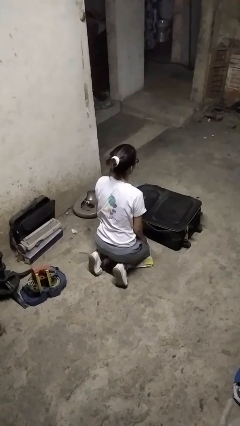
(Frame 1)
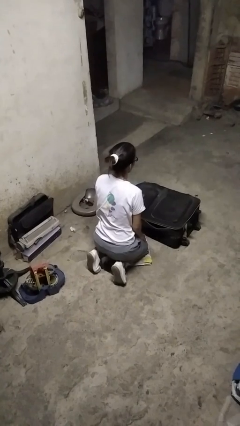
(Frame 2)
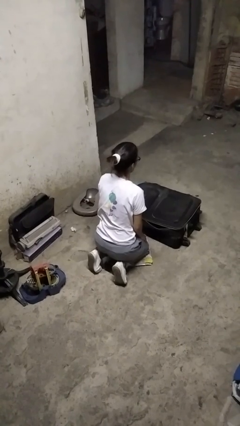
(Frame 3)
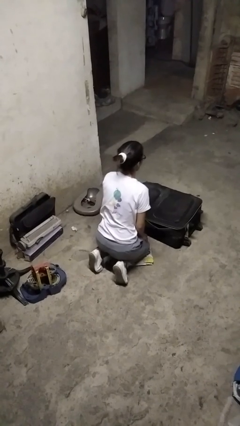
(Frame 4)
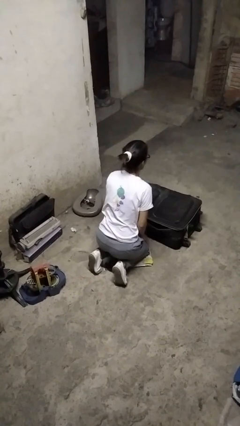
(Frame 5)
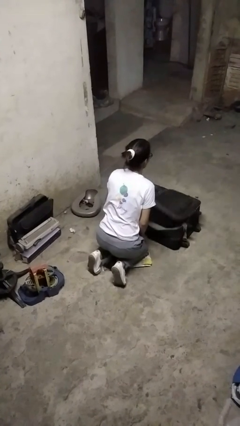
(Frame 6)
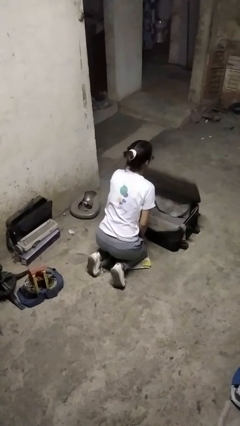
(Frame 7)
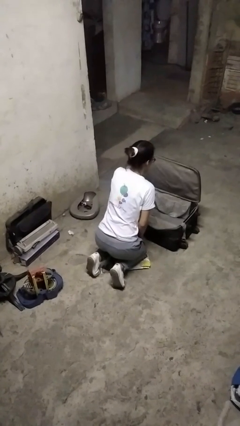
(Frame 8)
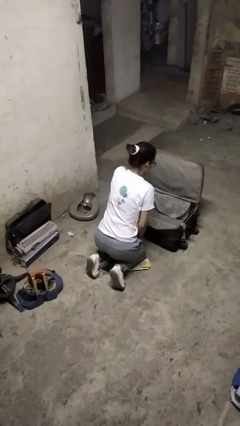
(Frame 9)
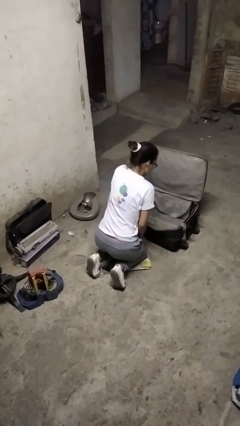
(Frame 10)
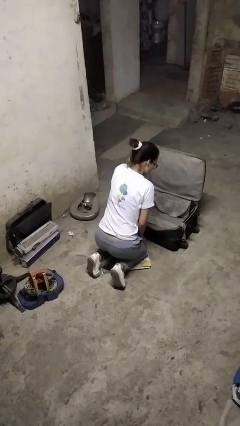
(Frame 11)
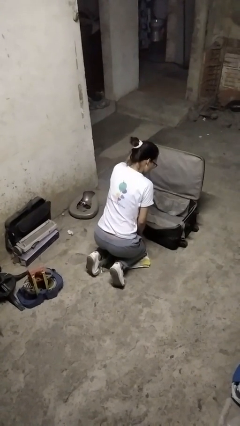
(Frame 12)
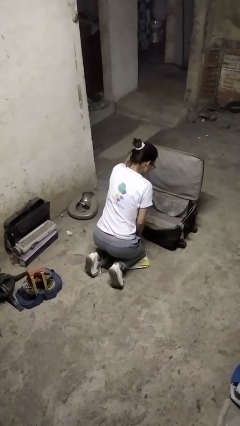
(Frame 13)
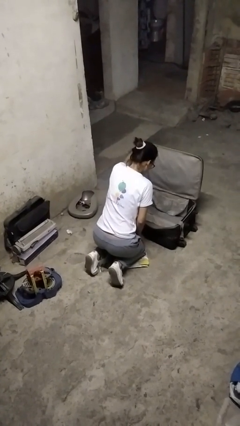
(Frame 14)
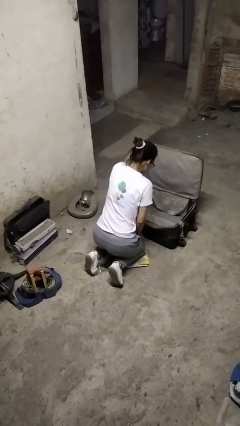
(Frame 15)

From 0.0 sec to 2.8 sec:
person opens suitcase

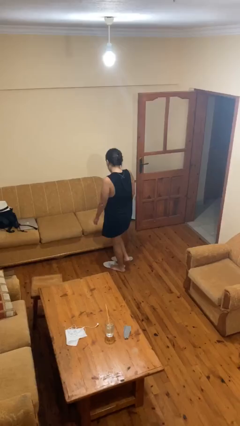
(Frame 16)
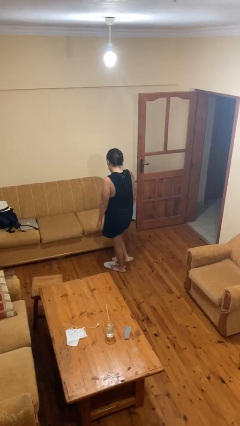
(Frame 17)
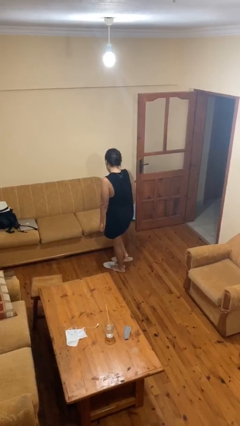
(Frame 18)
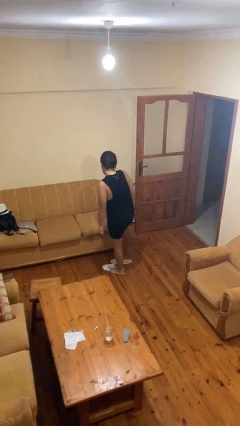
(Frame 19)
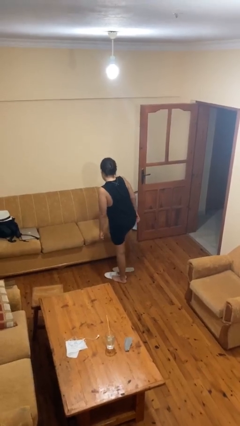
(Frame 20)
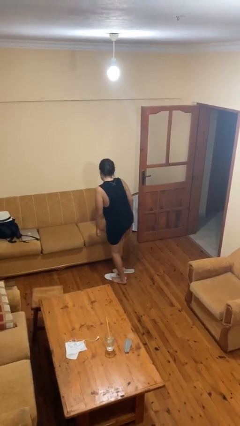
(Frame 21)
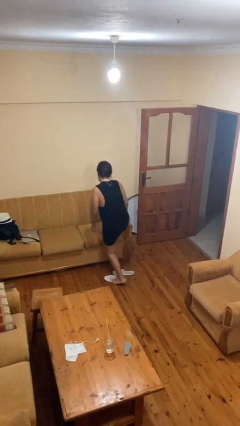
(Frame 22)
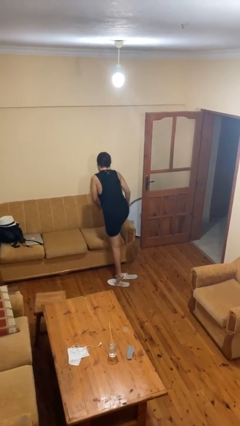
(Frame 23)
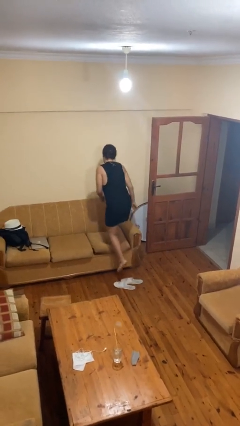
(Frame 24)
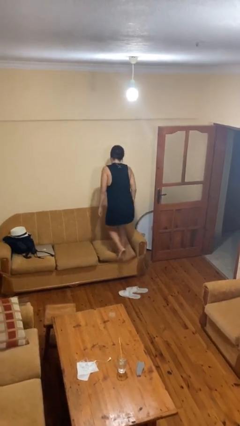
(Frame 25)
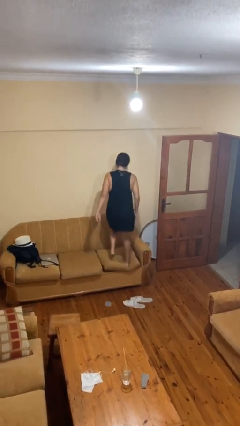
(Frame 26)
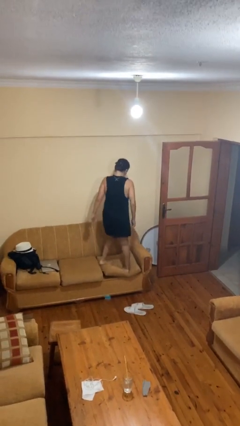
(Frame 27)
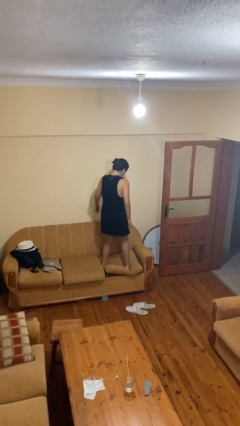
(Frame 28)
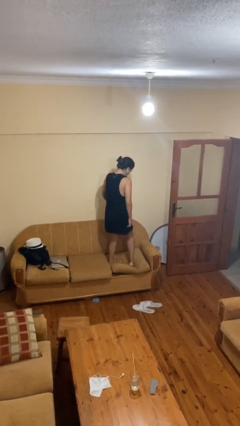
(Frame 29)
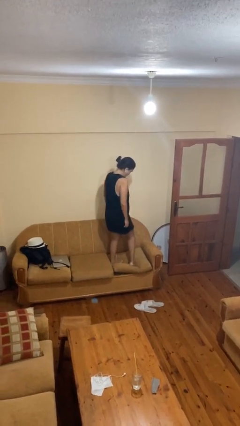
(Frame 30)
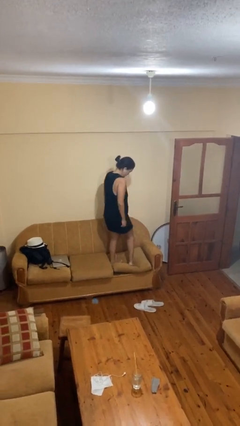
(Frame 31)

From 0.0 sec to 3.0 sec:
person climbs on couch

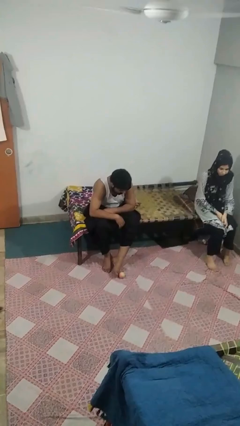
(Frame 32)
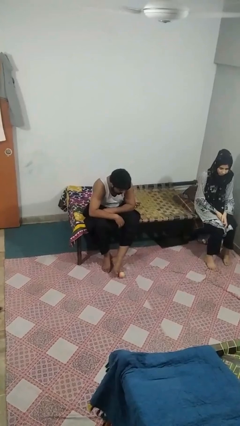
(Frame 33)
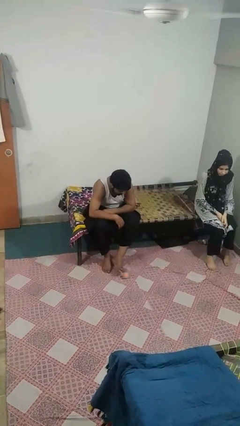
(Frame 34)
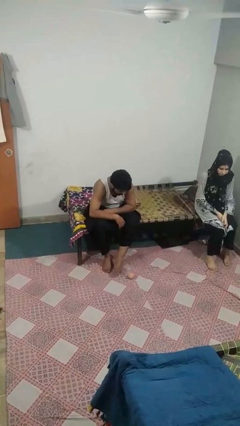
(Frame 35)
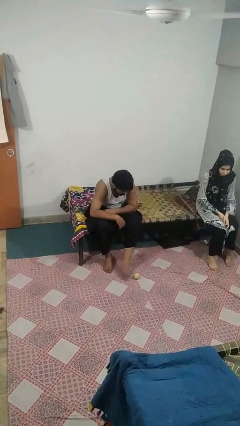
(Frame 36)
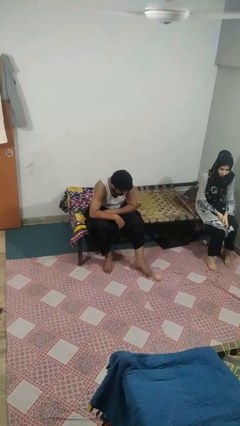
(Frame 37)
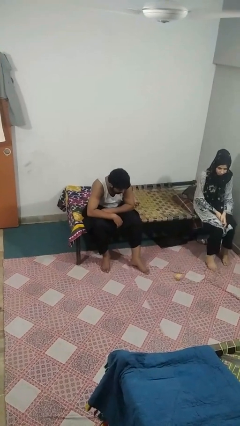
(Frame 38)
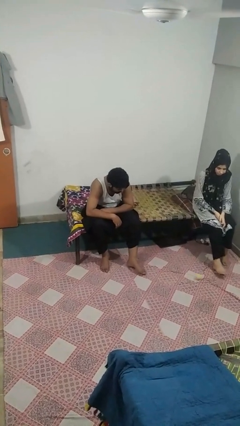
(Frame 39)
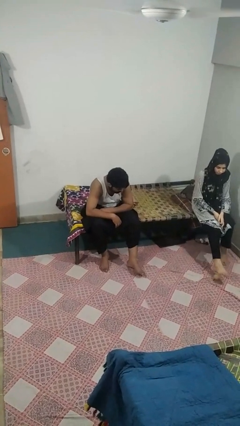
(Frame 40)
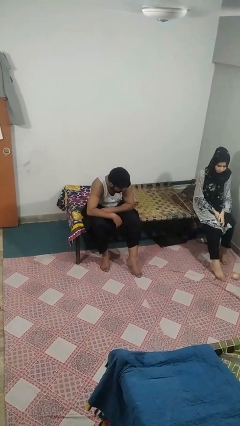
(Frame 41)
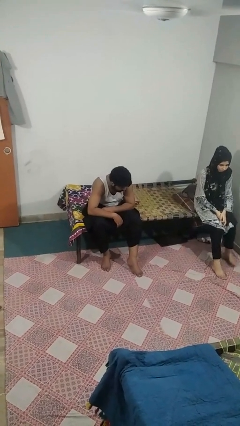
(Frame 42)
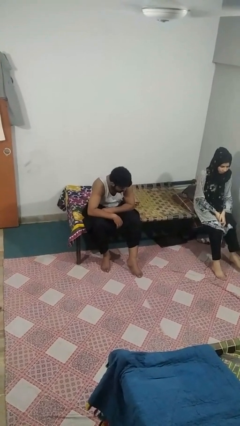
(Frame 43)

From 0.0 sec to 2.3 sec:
person kicks object to person

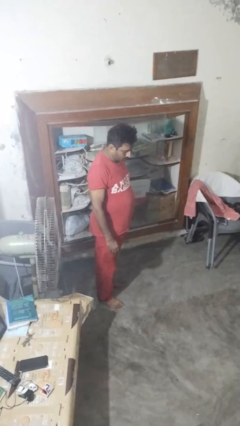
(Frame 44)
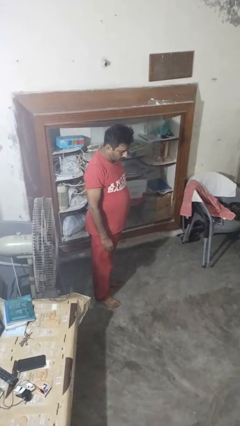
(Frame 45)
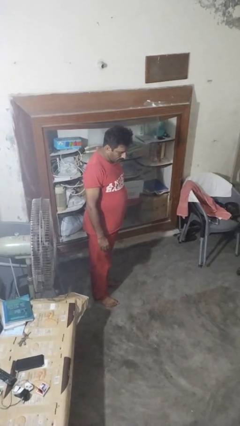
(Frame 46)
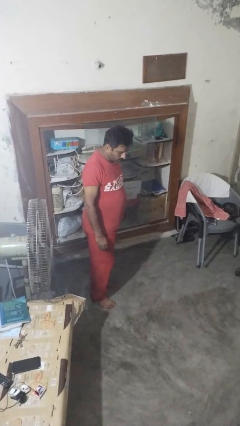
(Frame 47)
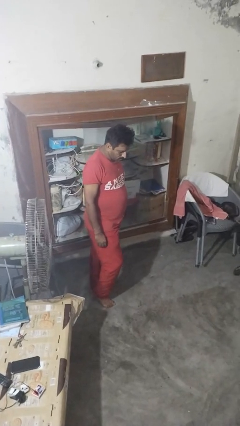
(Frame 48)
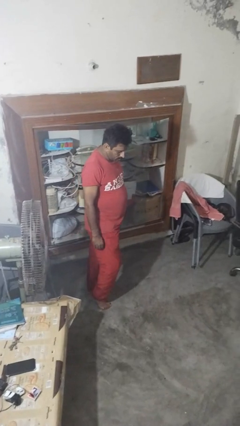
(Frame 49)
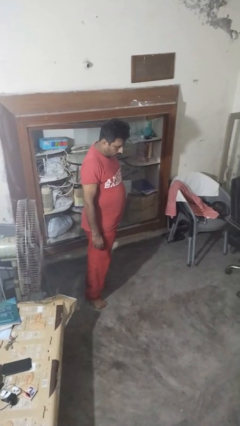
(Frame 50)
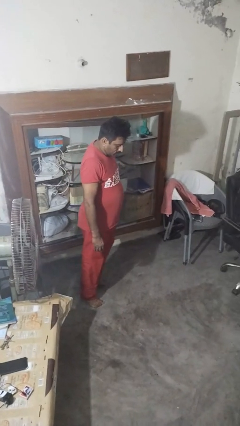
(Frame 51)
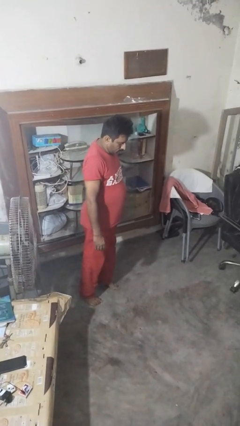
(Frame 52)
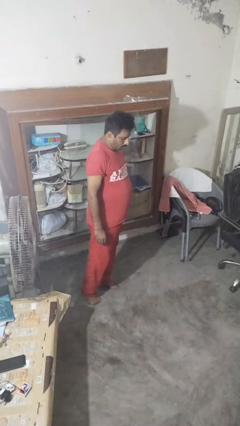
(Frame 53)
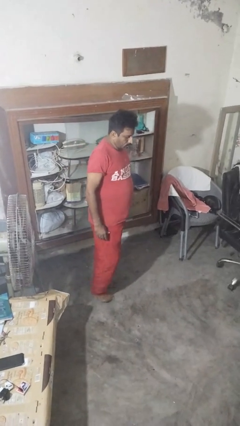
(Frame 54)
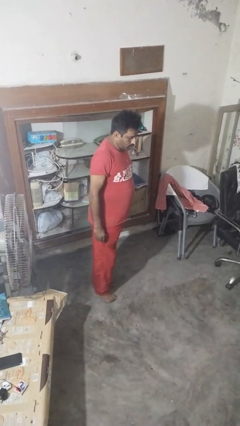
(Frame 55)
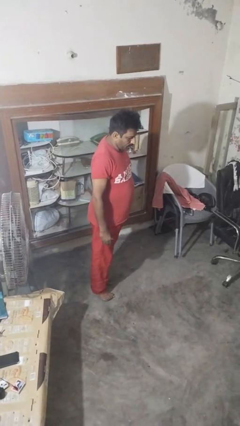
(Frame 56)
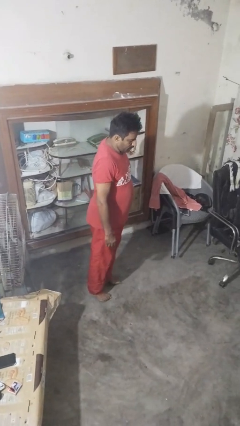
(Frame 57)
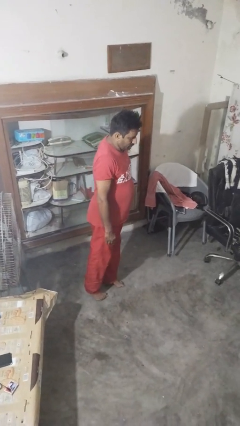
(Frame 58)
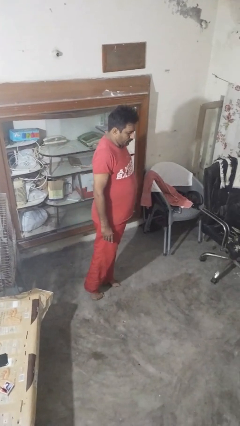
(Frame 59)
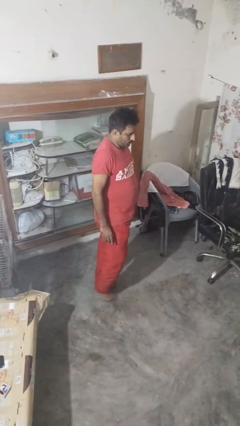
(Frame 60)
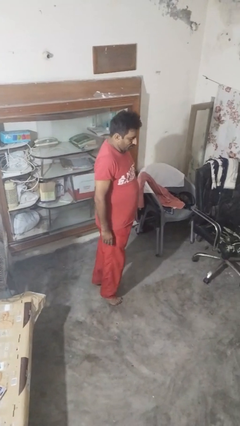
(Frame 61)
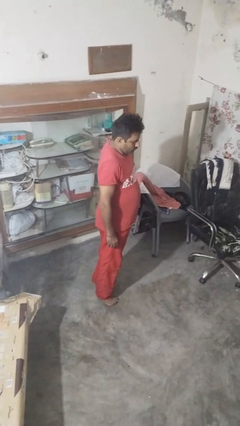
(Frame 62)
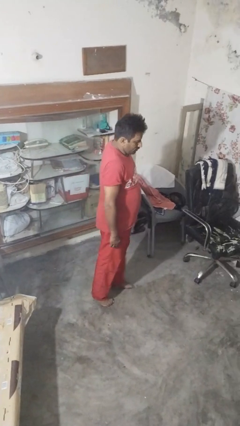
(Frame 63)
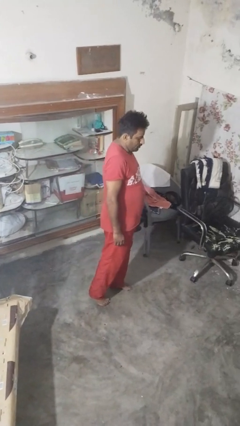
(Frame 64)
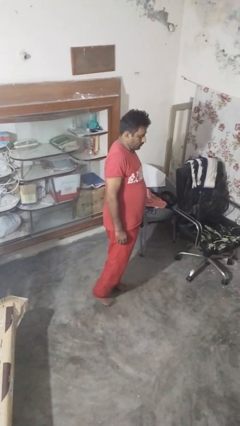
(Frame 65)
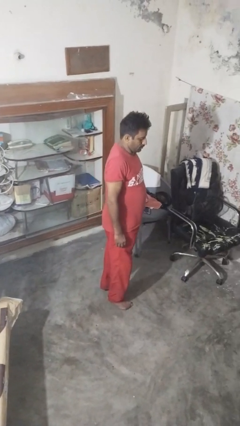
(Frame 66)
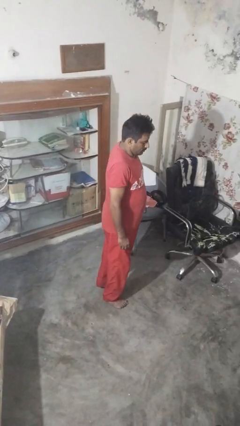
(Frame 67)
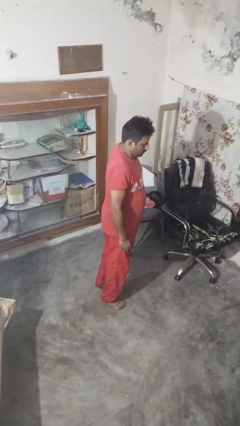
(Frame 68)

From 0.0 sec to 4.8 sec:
person walks tiptoe

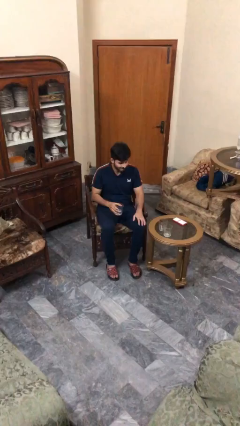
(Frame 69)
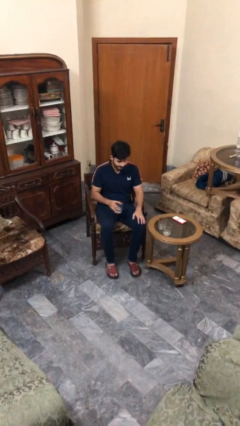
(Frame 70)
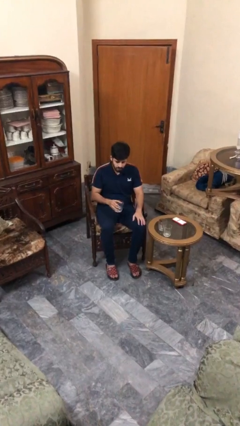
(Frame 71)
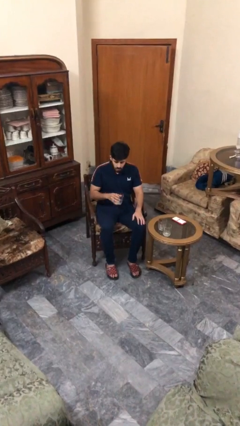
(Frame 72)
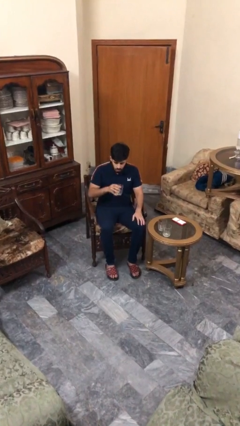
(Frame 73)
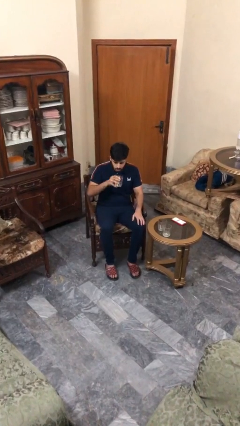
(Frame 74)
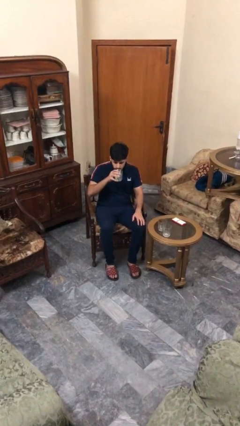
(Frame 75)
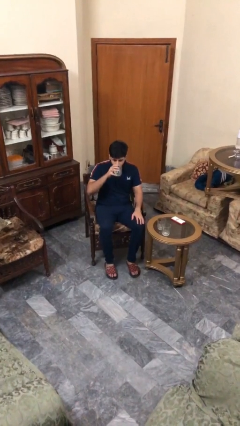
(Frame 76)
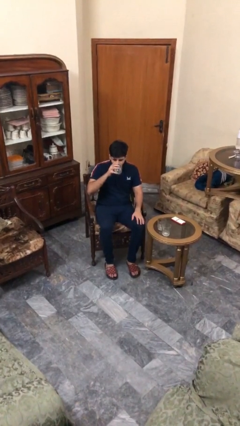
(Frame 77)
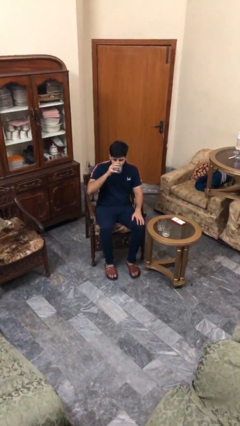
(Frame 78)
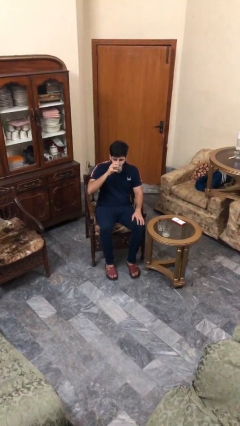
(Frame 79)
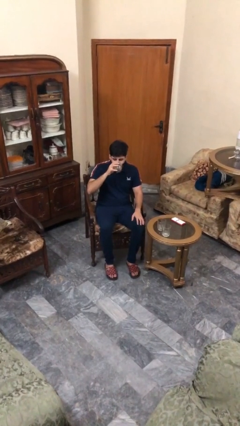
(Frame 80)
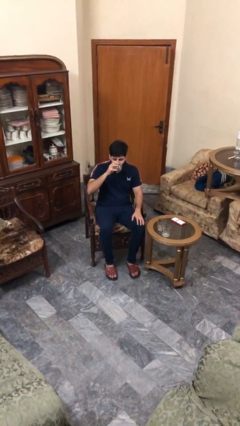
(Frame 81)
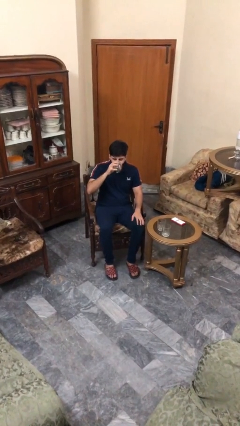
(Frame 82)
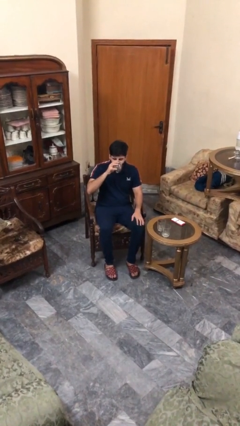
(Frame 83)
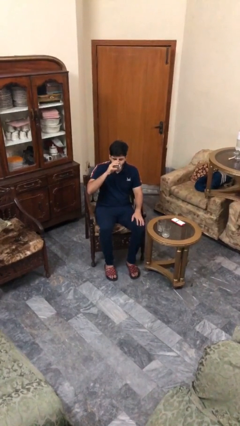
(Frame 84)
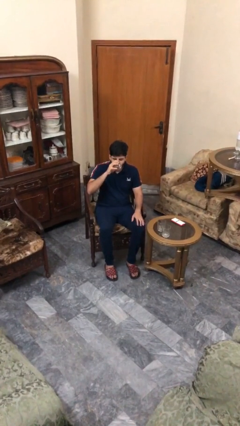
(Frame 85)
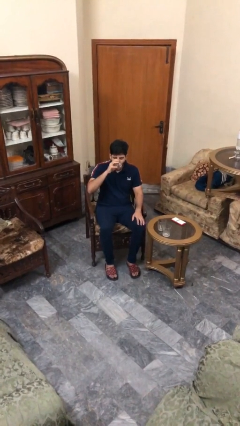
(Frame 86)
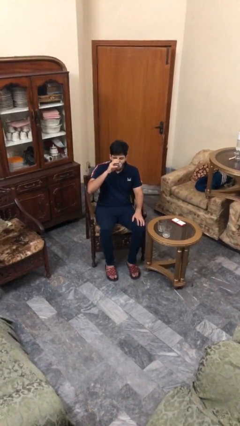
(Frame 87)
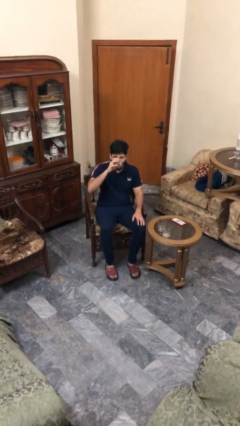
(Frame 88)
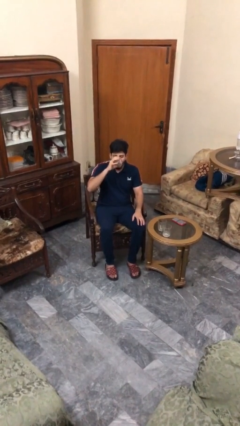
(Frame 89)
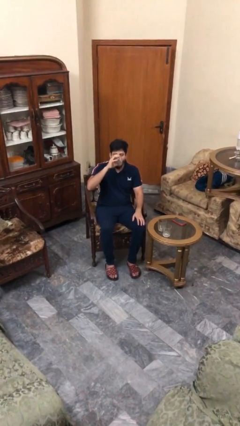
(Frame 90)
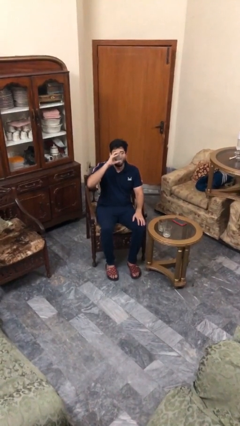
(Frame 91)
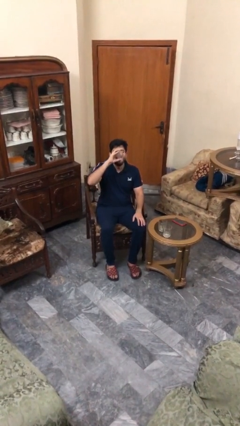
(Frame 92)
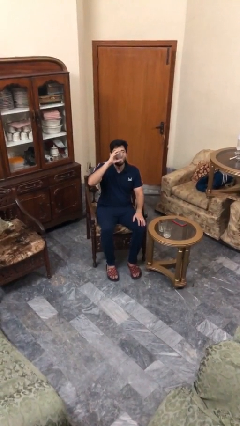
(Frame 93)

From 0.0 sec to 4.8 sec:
person drinks from shotglass
